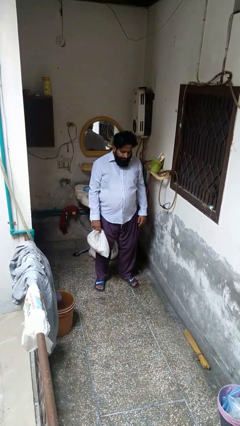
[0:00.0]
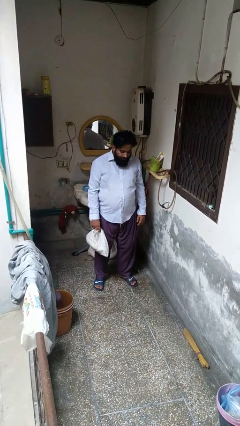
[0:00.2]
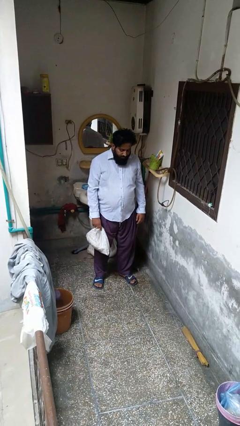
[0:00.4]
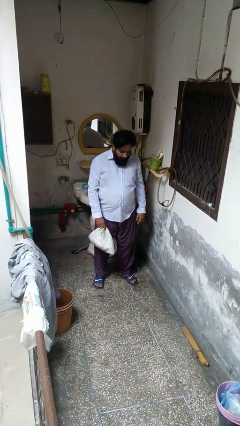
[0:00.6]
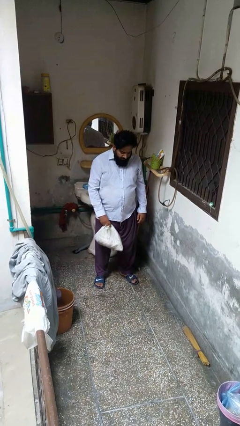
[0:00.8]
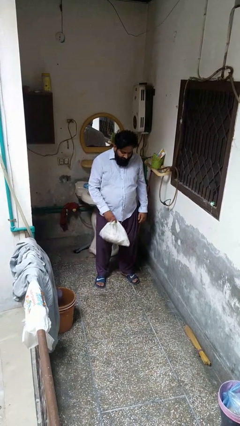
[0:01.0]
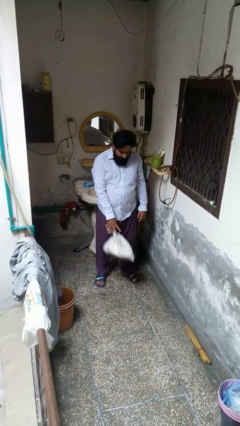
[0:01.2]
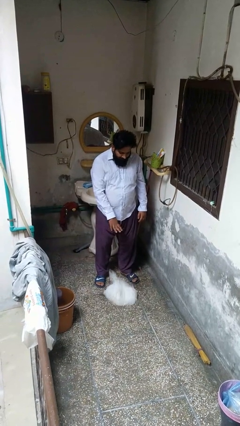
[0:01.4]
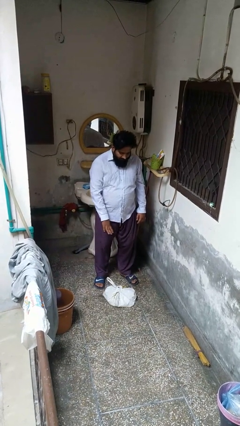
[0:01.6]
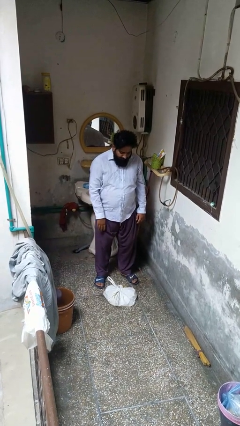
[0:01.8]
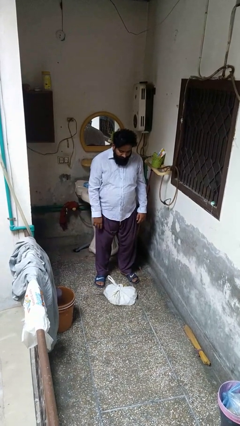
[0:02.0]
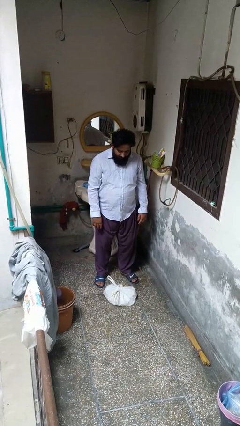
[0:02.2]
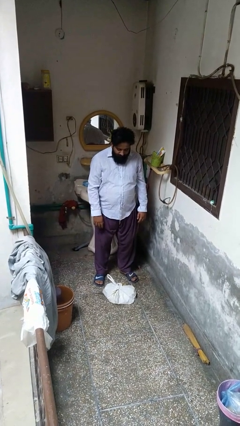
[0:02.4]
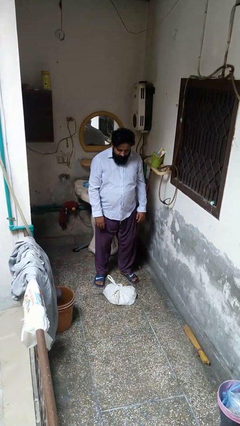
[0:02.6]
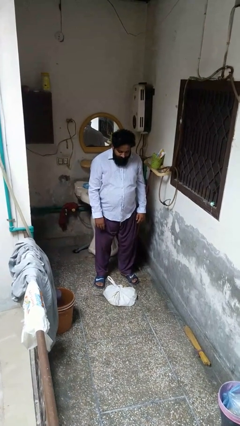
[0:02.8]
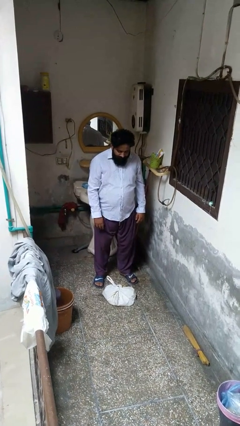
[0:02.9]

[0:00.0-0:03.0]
person throws object to ground

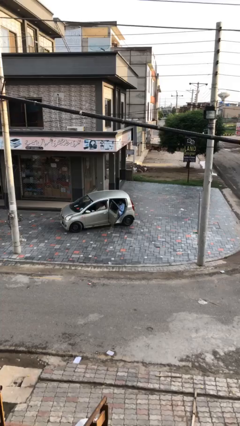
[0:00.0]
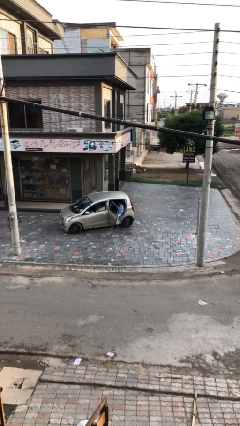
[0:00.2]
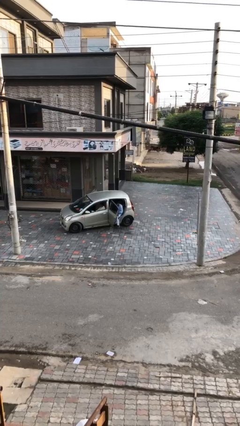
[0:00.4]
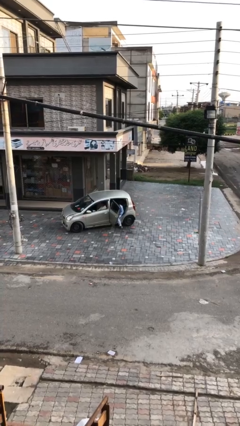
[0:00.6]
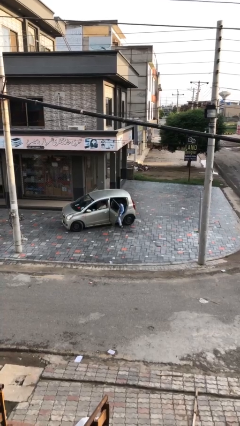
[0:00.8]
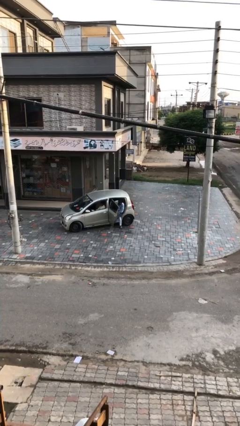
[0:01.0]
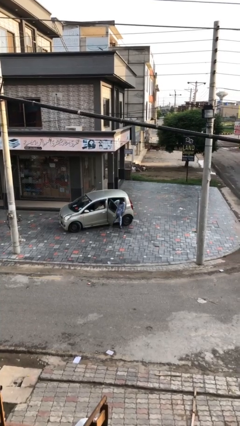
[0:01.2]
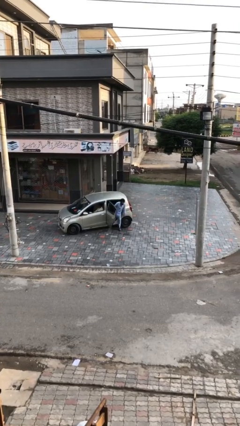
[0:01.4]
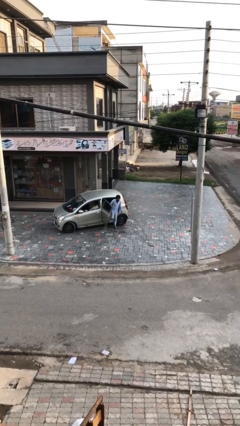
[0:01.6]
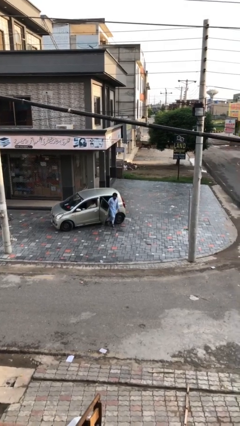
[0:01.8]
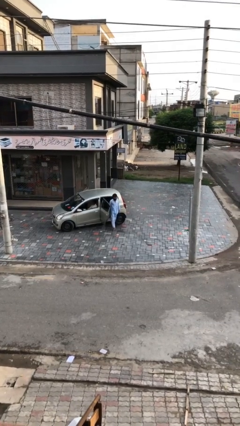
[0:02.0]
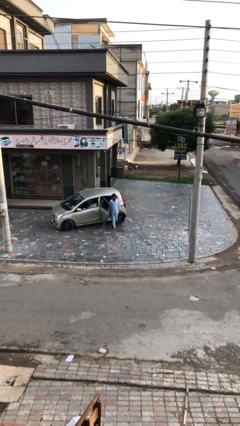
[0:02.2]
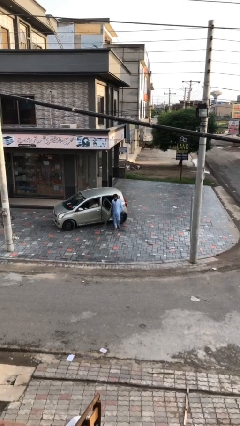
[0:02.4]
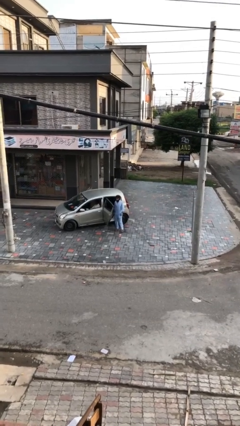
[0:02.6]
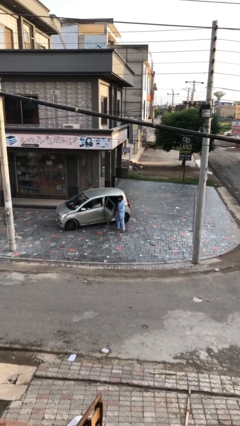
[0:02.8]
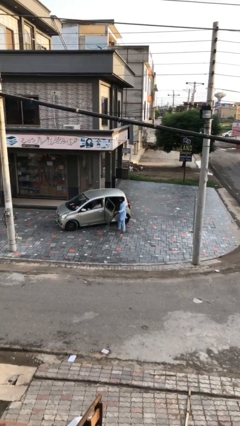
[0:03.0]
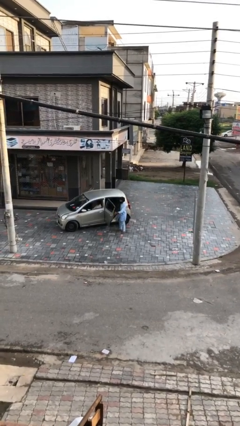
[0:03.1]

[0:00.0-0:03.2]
person exits car

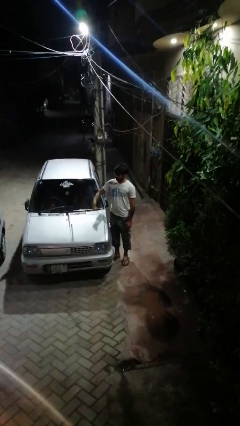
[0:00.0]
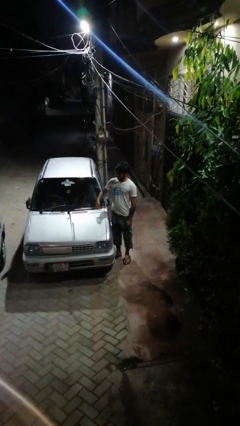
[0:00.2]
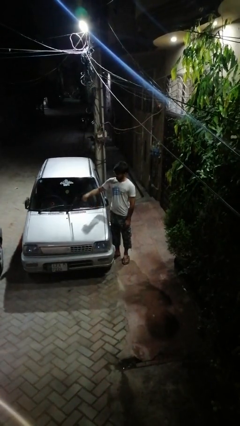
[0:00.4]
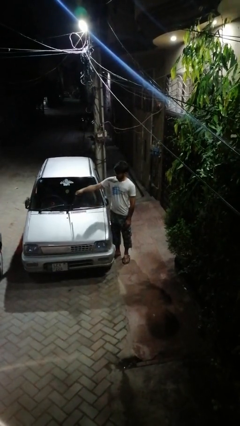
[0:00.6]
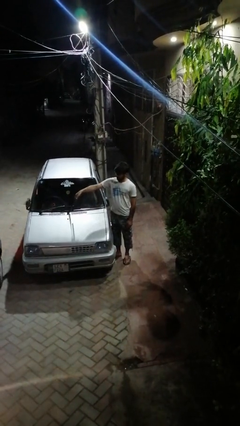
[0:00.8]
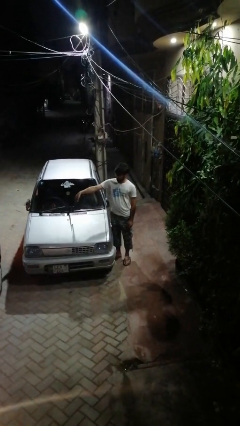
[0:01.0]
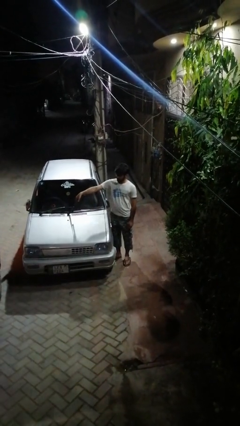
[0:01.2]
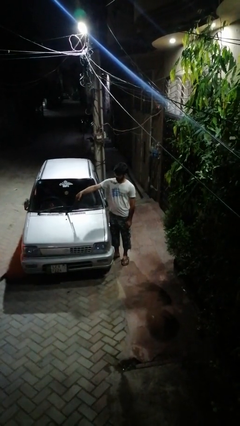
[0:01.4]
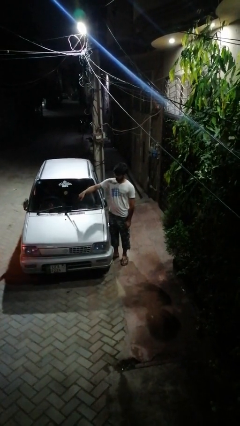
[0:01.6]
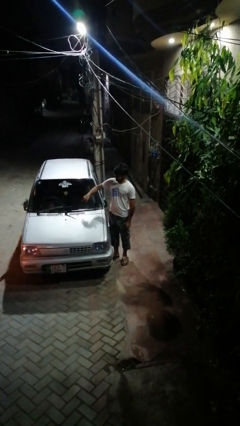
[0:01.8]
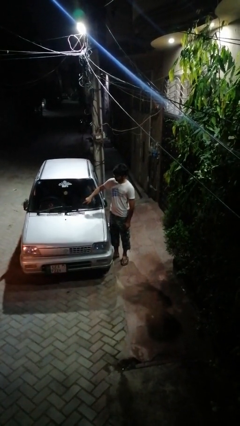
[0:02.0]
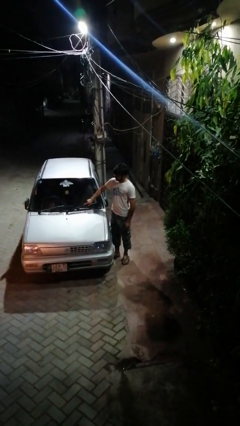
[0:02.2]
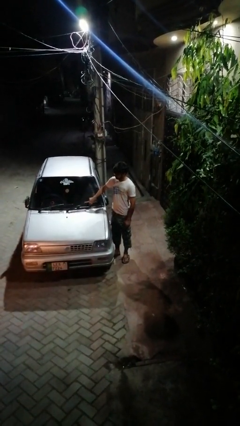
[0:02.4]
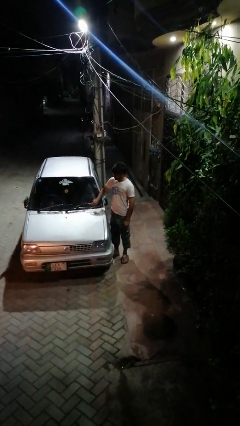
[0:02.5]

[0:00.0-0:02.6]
person flips down car wipers

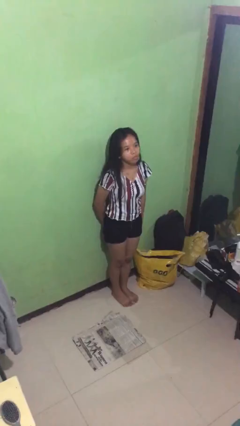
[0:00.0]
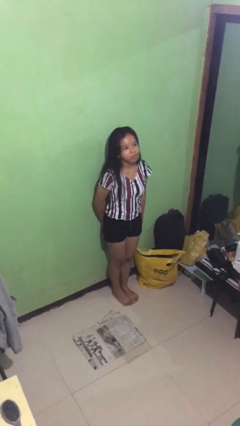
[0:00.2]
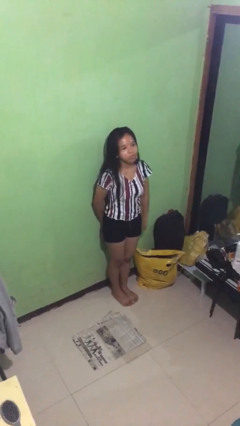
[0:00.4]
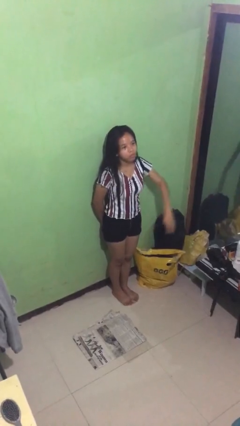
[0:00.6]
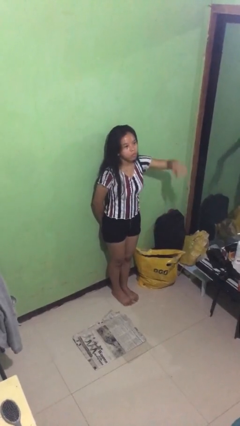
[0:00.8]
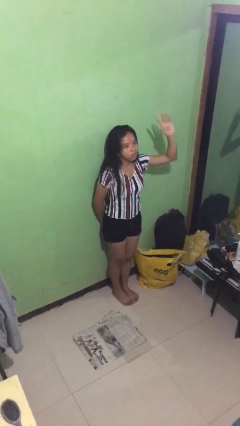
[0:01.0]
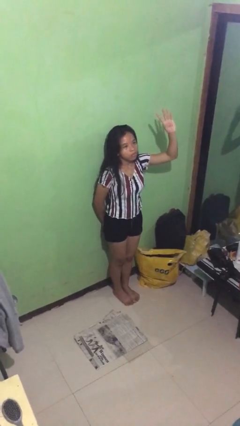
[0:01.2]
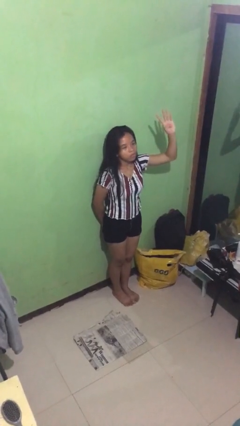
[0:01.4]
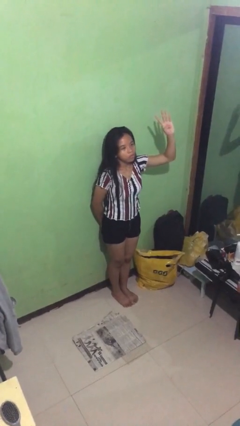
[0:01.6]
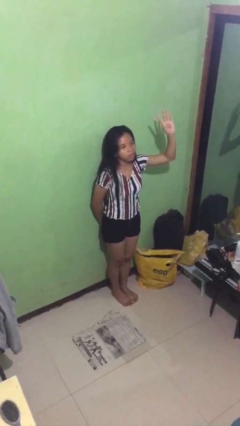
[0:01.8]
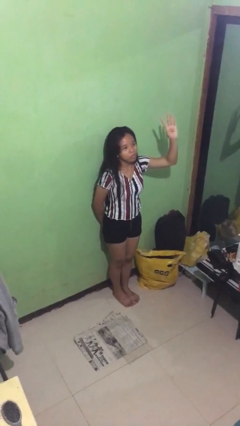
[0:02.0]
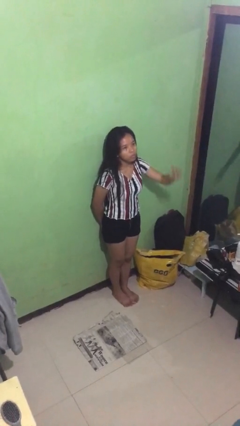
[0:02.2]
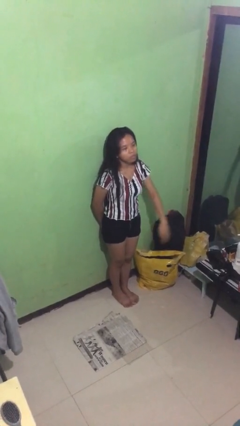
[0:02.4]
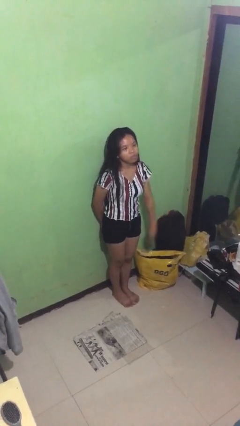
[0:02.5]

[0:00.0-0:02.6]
person gestures number four

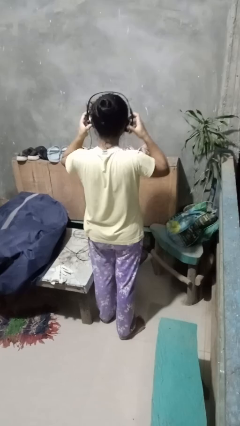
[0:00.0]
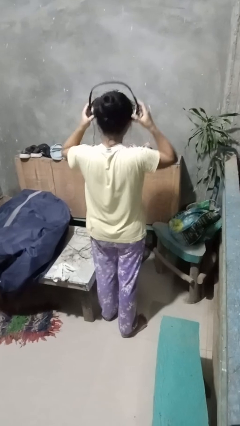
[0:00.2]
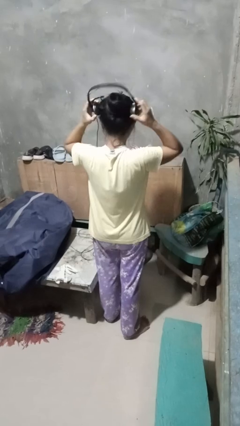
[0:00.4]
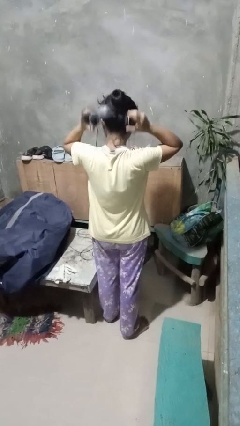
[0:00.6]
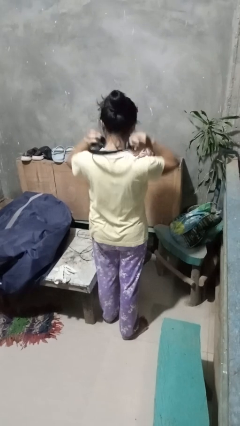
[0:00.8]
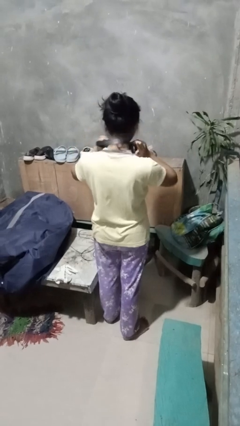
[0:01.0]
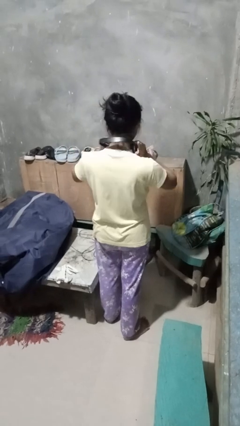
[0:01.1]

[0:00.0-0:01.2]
person takes off headphones

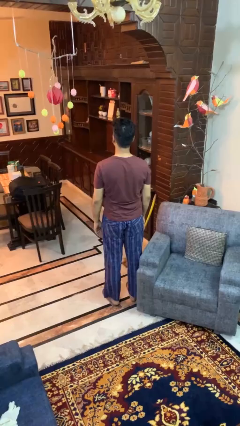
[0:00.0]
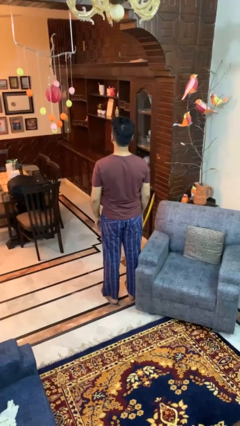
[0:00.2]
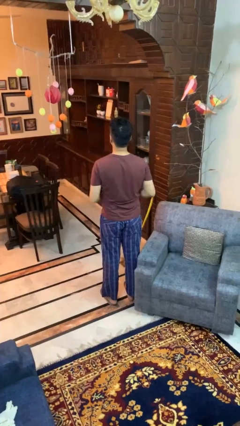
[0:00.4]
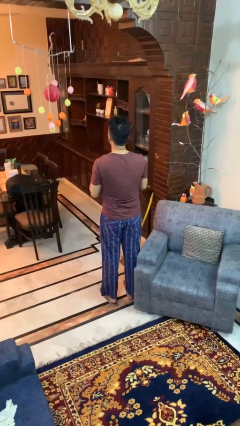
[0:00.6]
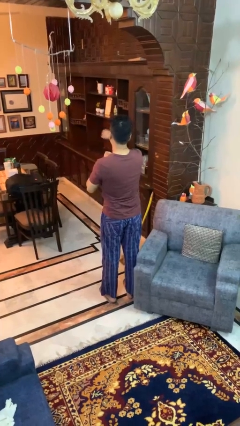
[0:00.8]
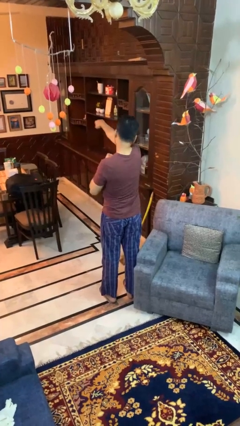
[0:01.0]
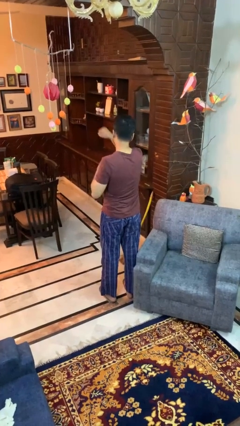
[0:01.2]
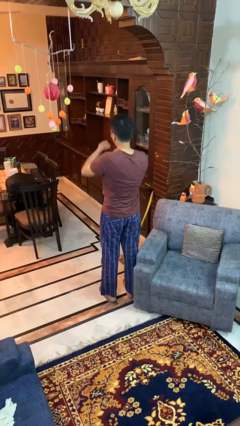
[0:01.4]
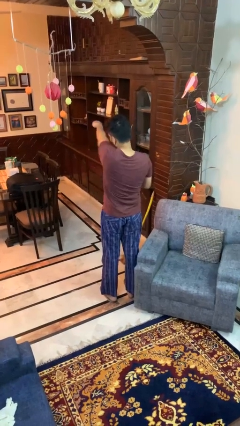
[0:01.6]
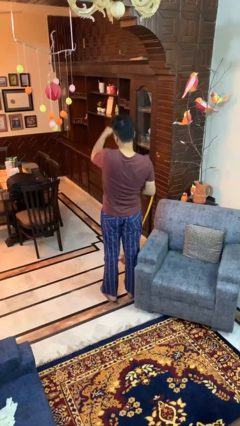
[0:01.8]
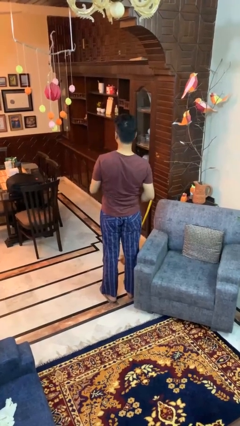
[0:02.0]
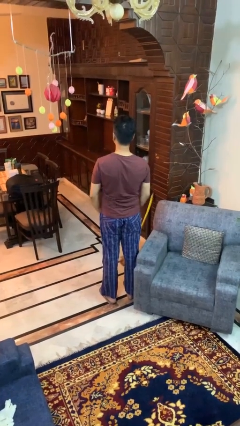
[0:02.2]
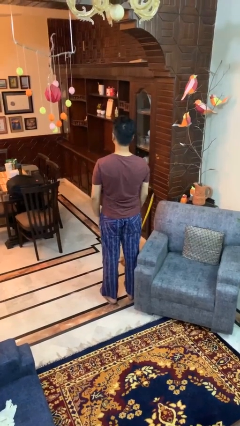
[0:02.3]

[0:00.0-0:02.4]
person punches

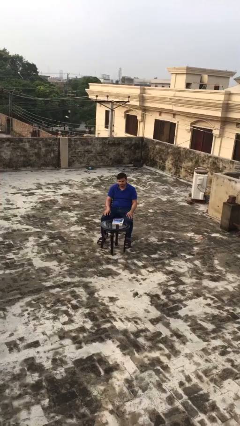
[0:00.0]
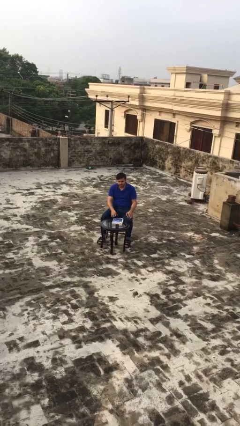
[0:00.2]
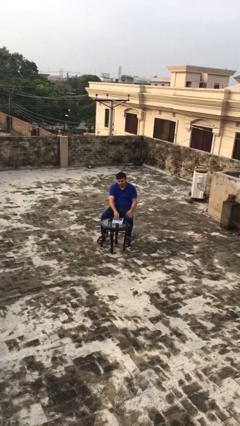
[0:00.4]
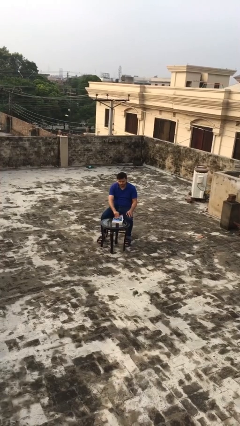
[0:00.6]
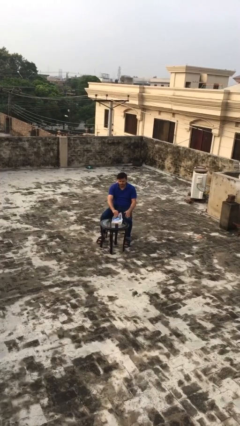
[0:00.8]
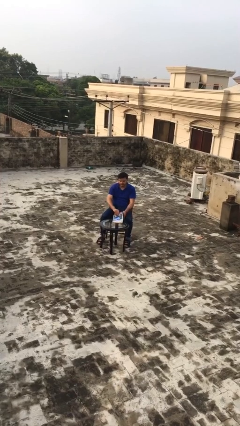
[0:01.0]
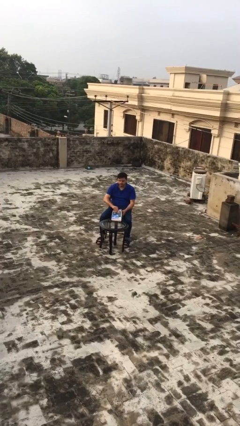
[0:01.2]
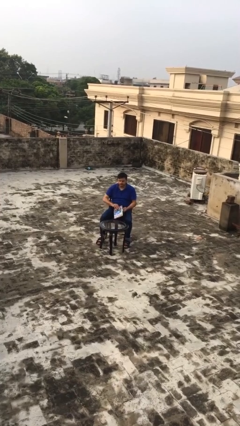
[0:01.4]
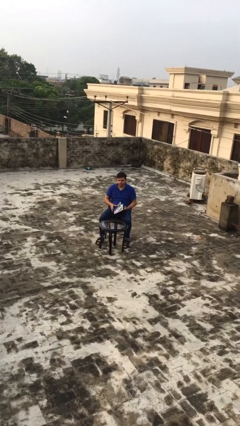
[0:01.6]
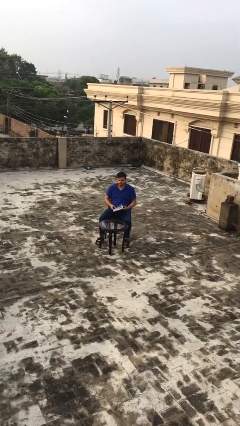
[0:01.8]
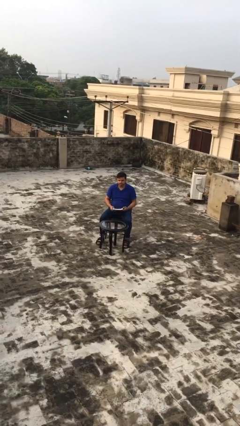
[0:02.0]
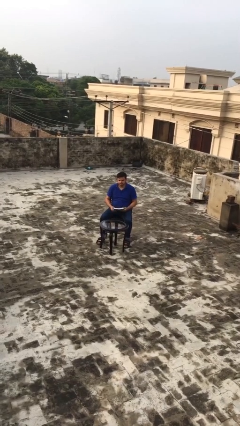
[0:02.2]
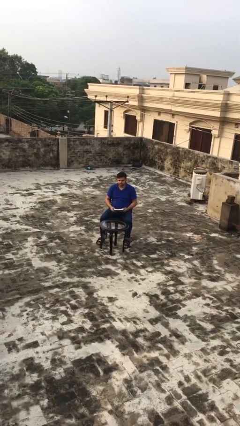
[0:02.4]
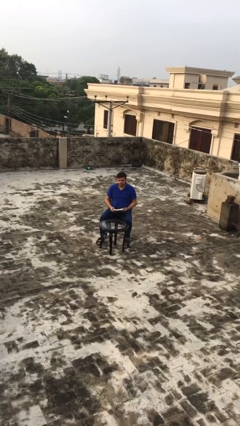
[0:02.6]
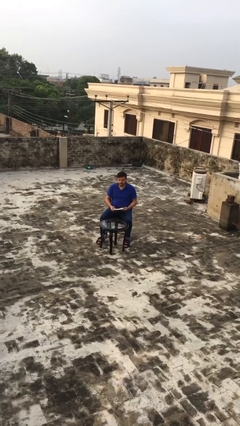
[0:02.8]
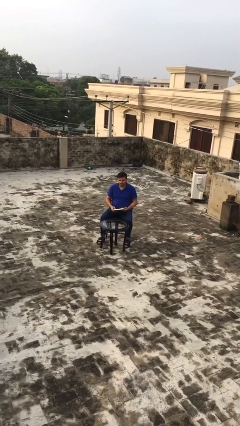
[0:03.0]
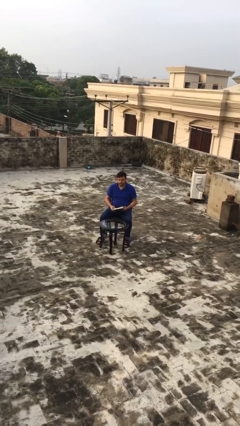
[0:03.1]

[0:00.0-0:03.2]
person picks up object from table
